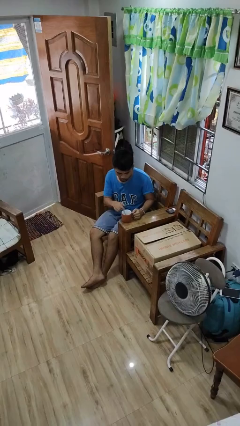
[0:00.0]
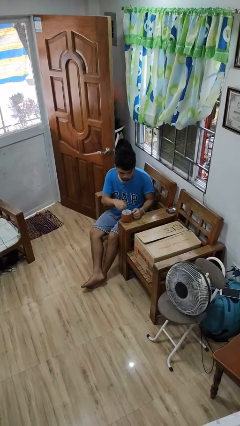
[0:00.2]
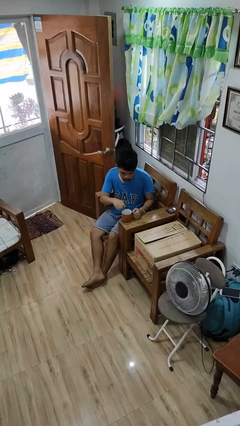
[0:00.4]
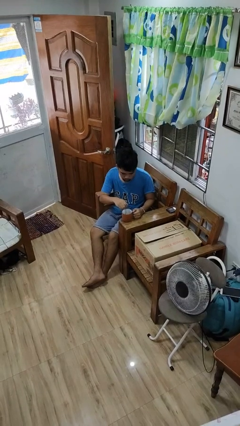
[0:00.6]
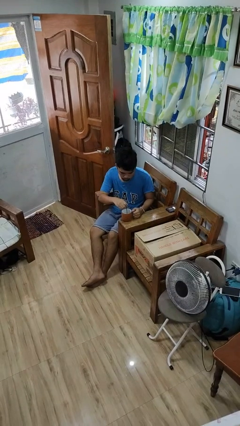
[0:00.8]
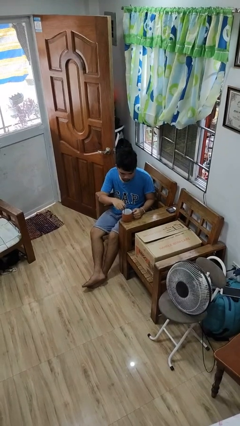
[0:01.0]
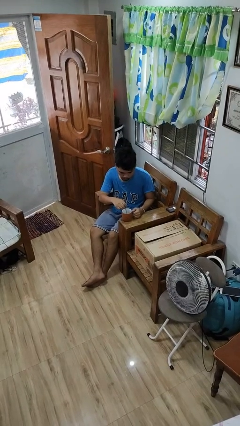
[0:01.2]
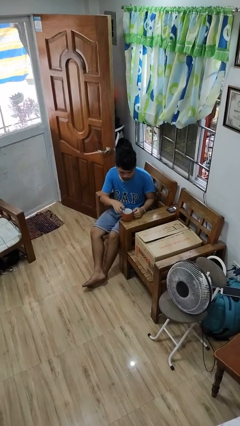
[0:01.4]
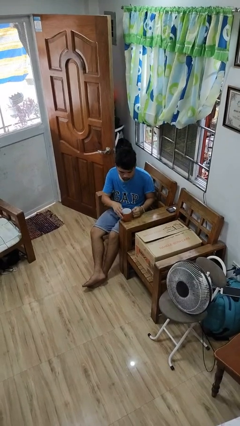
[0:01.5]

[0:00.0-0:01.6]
person stirs mug

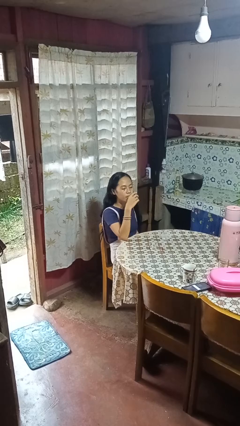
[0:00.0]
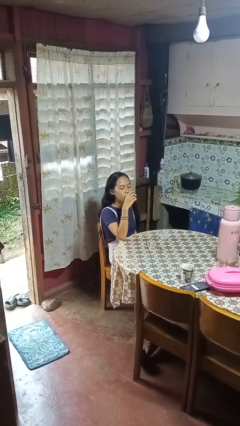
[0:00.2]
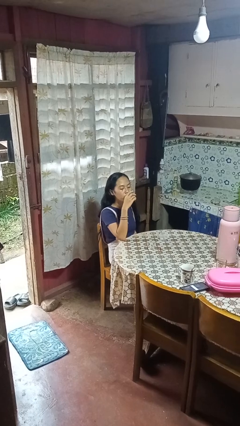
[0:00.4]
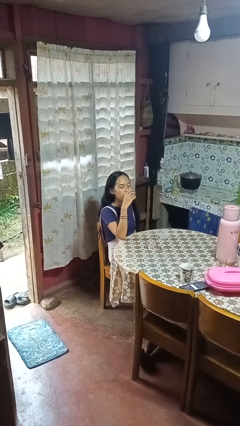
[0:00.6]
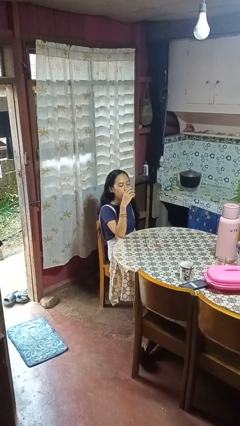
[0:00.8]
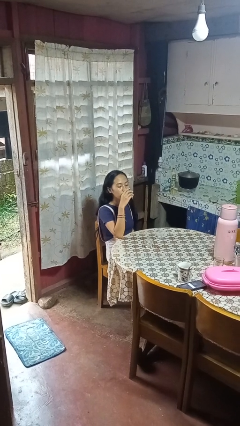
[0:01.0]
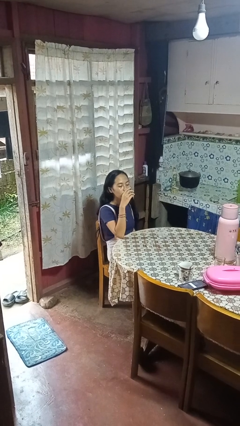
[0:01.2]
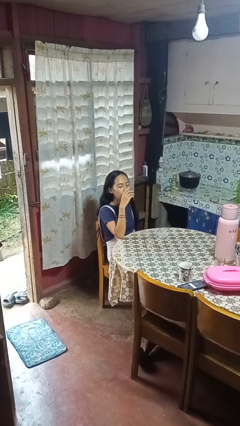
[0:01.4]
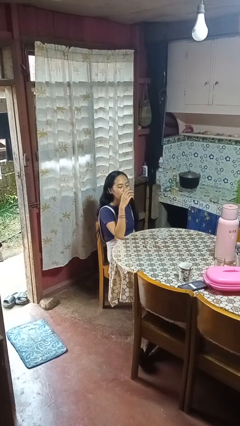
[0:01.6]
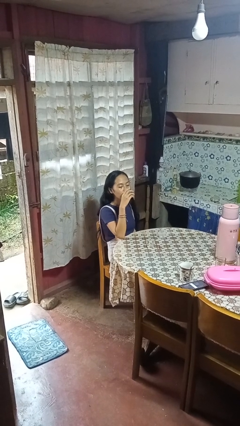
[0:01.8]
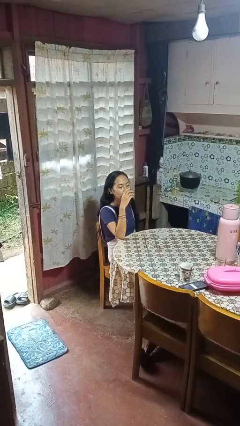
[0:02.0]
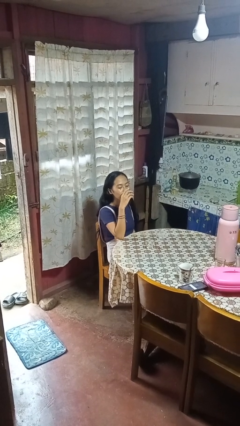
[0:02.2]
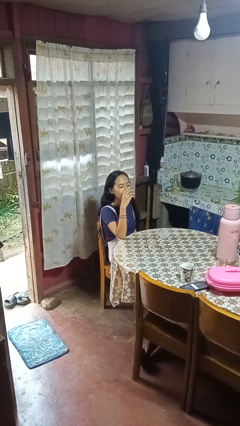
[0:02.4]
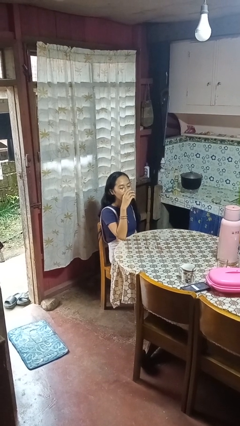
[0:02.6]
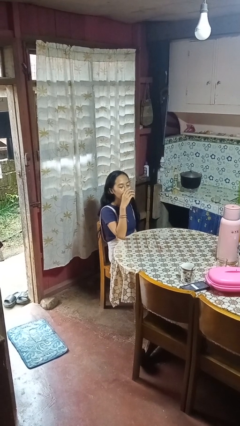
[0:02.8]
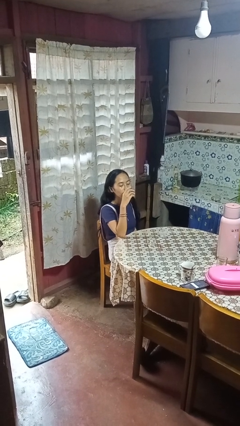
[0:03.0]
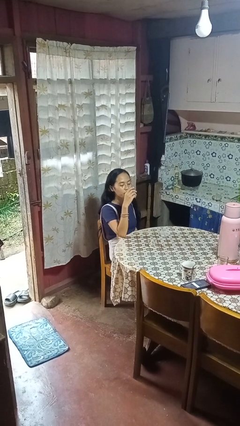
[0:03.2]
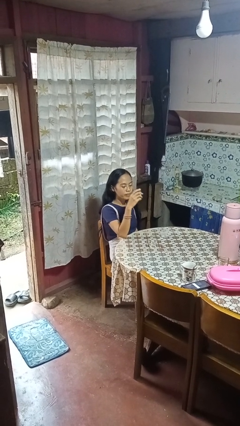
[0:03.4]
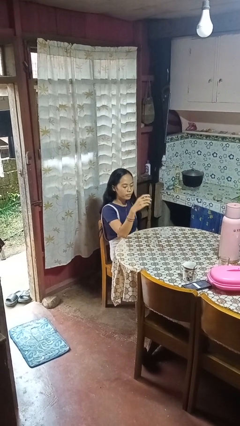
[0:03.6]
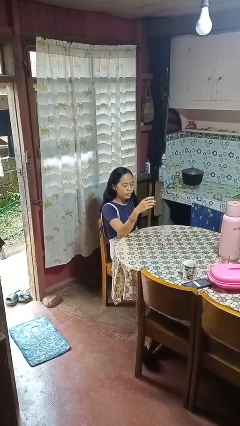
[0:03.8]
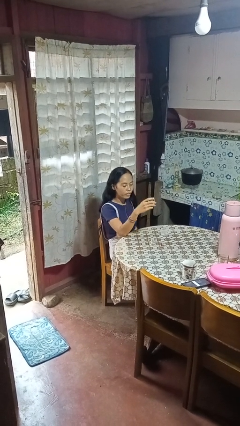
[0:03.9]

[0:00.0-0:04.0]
person drinks from shotglass

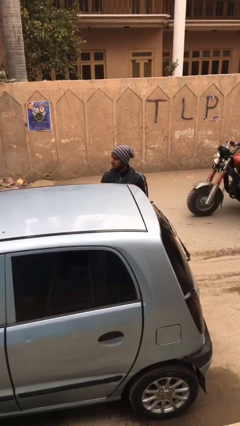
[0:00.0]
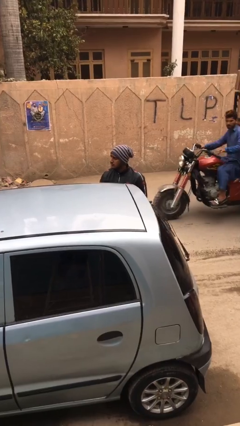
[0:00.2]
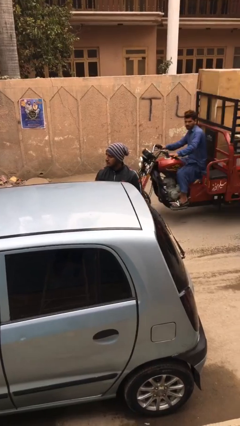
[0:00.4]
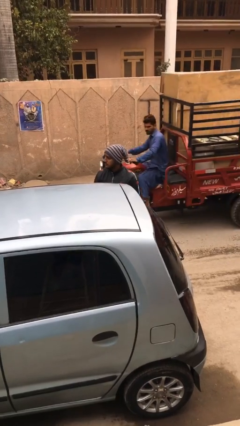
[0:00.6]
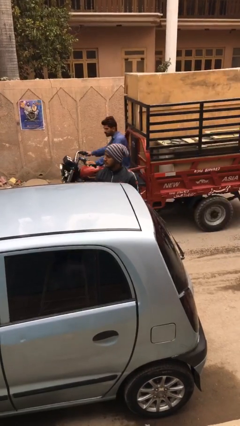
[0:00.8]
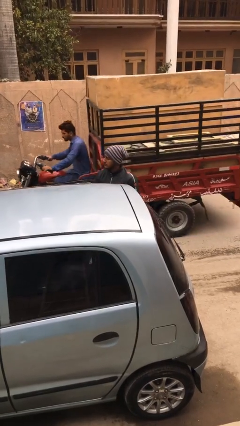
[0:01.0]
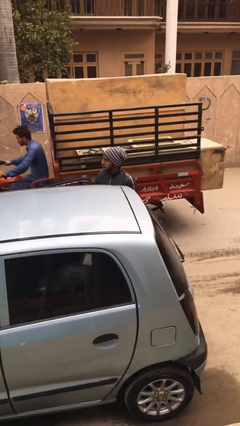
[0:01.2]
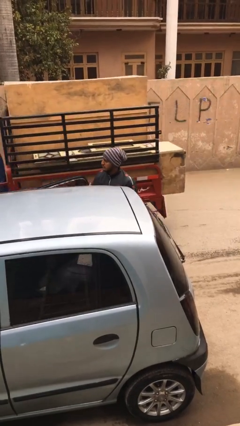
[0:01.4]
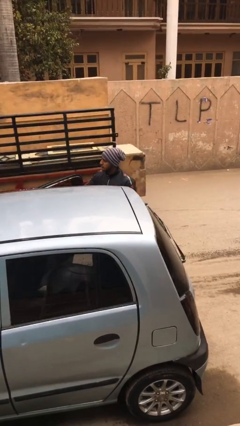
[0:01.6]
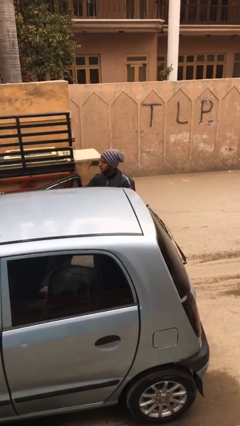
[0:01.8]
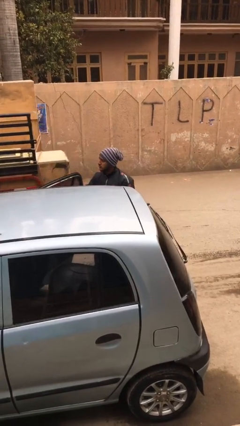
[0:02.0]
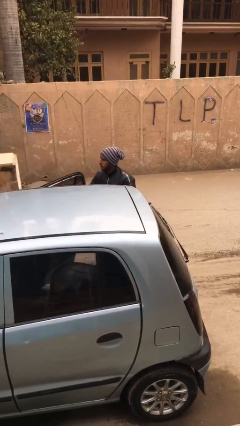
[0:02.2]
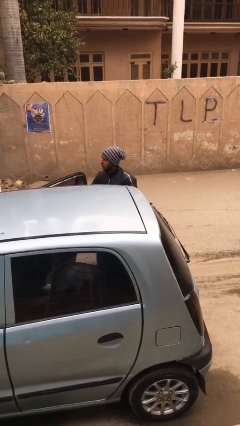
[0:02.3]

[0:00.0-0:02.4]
person opens car door

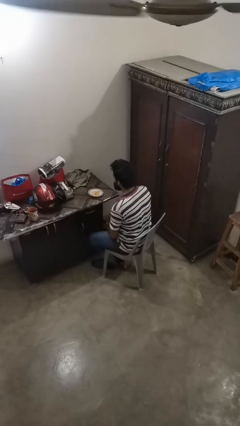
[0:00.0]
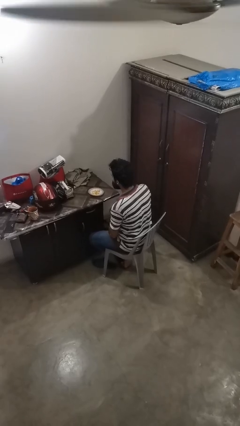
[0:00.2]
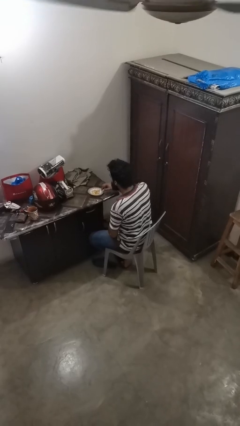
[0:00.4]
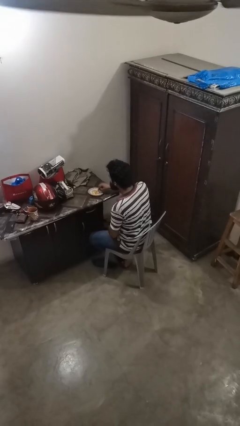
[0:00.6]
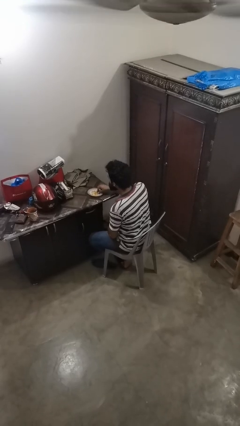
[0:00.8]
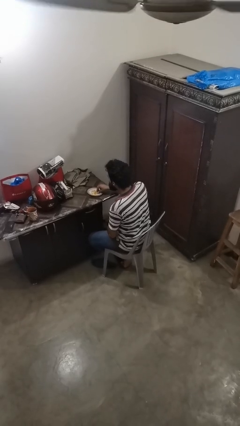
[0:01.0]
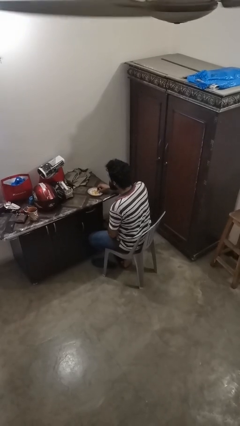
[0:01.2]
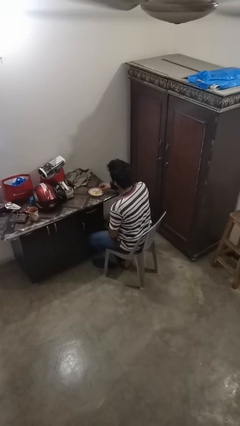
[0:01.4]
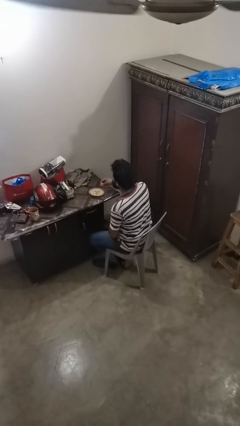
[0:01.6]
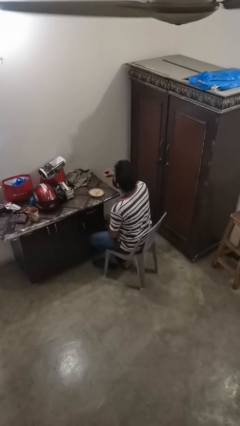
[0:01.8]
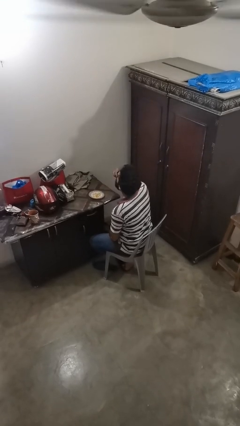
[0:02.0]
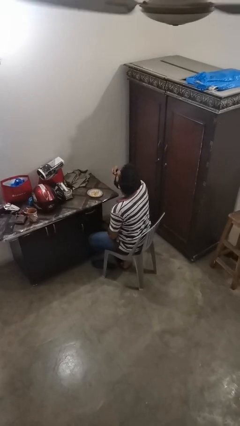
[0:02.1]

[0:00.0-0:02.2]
person eats with hands

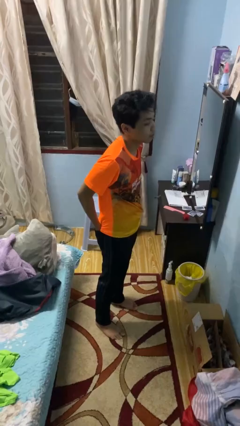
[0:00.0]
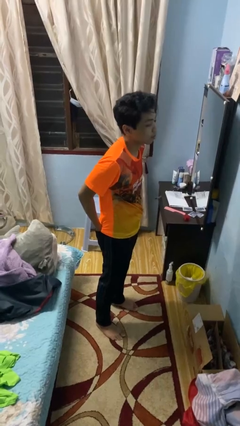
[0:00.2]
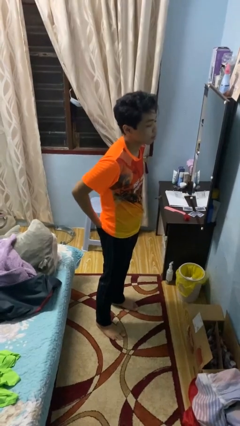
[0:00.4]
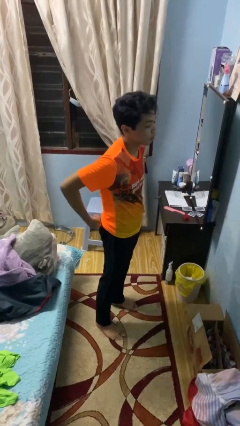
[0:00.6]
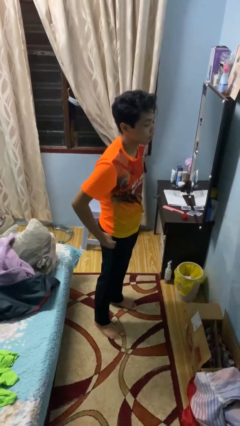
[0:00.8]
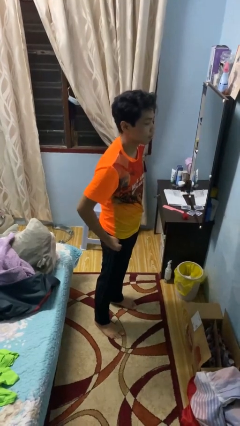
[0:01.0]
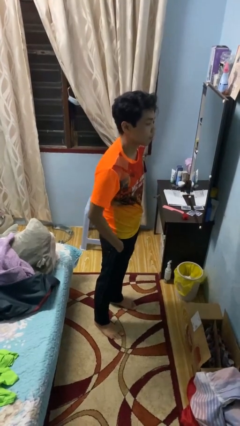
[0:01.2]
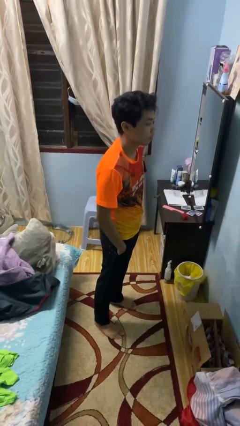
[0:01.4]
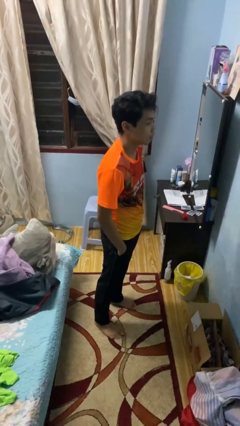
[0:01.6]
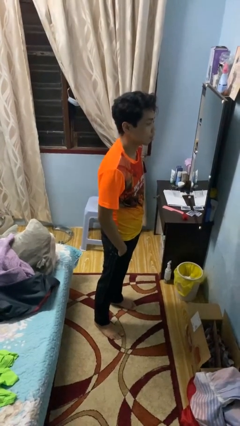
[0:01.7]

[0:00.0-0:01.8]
person puts hands in back pockets

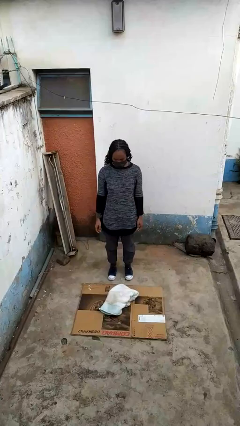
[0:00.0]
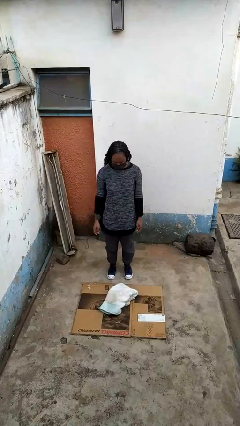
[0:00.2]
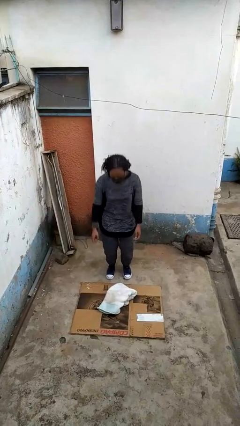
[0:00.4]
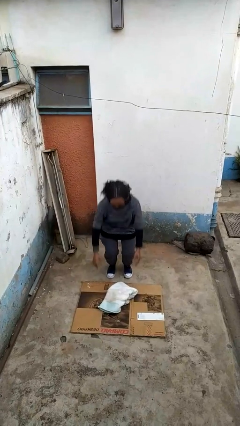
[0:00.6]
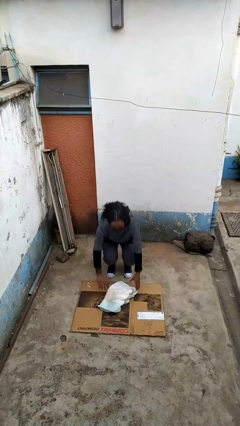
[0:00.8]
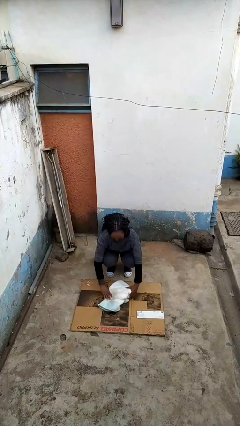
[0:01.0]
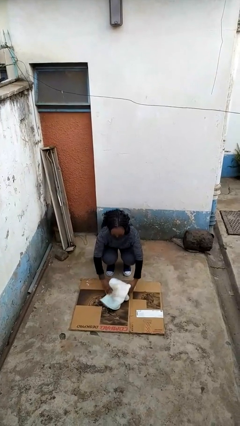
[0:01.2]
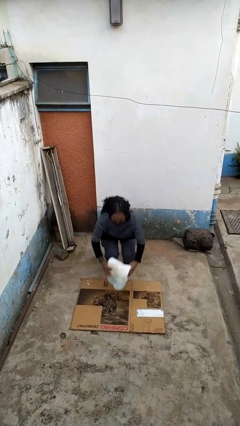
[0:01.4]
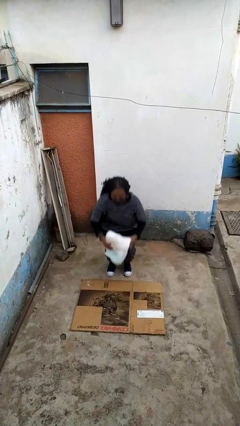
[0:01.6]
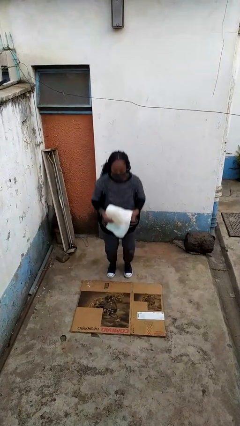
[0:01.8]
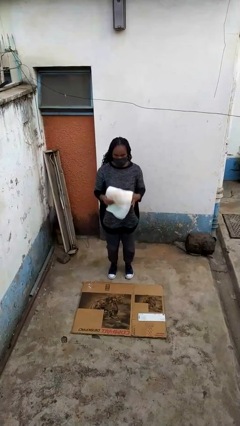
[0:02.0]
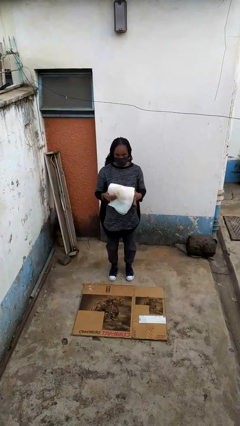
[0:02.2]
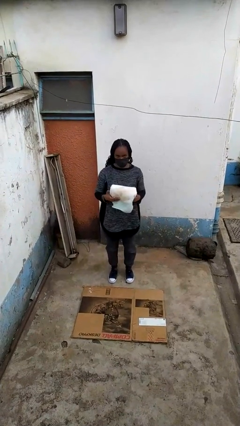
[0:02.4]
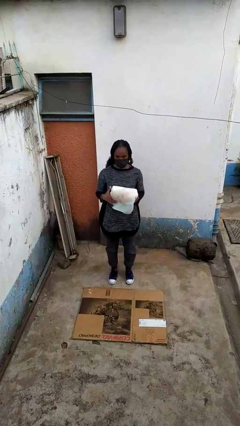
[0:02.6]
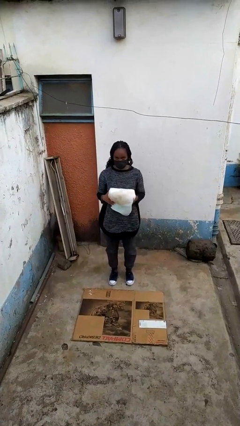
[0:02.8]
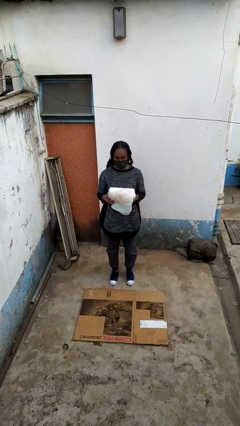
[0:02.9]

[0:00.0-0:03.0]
person picks up object from floor

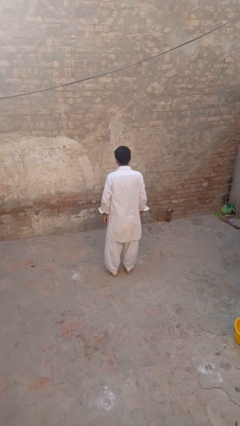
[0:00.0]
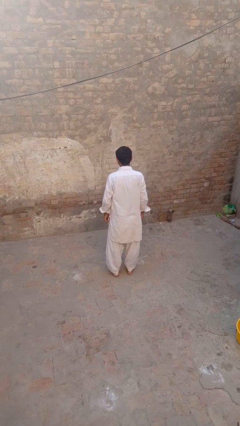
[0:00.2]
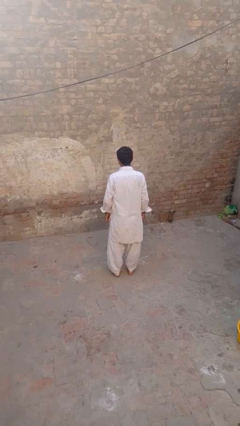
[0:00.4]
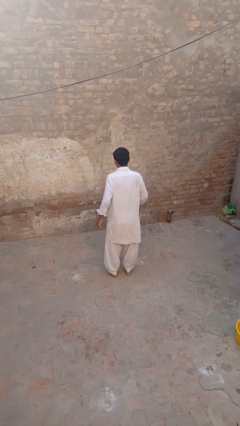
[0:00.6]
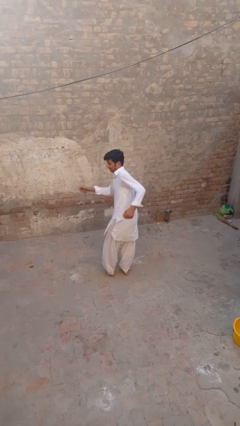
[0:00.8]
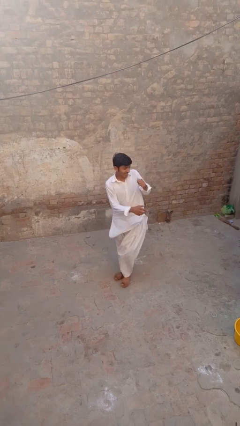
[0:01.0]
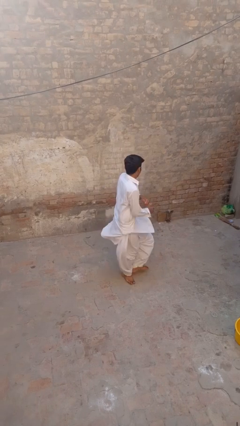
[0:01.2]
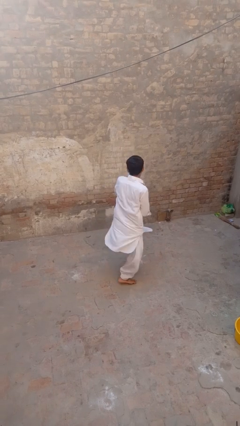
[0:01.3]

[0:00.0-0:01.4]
person twirls

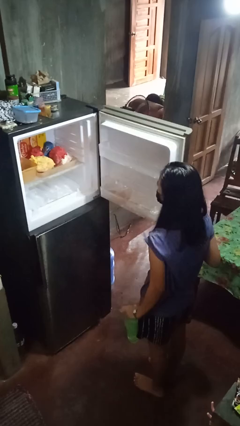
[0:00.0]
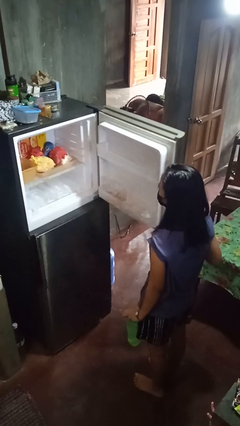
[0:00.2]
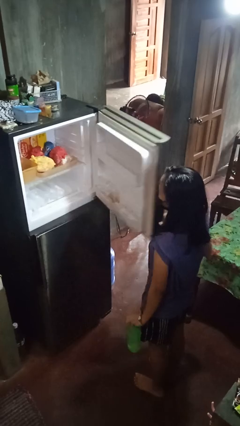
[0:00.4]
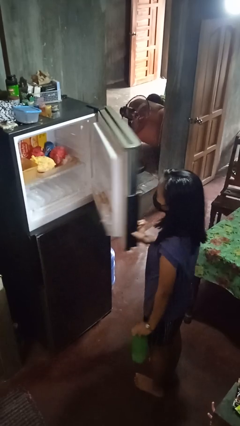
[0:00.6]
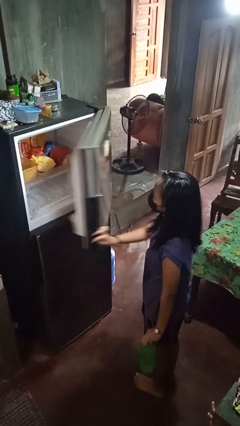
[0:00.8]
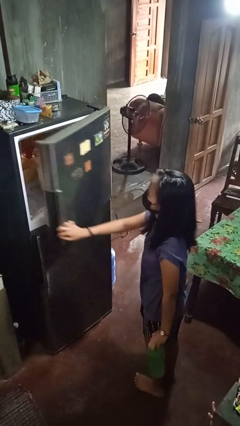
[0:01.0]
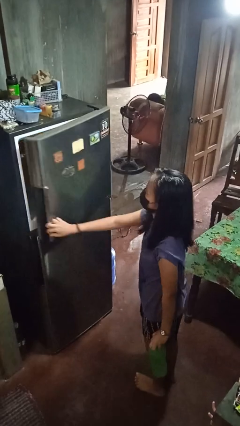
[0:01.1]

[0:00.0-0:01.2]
person closes refrigerator
